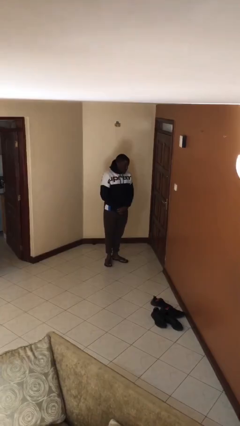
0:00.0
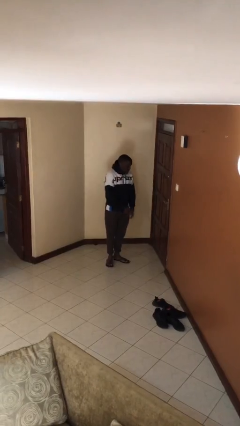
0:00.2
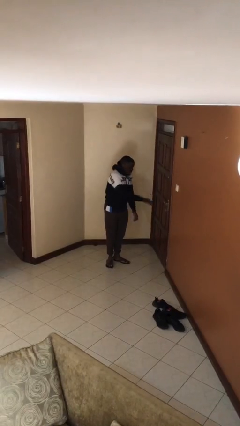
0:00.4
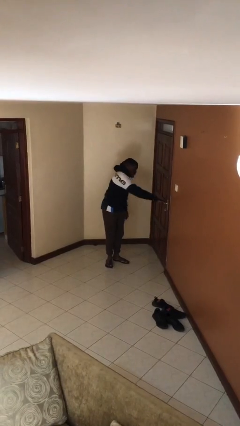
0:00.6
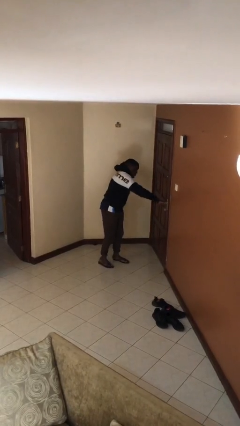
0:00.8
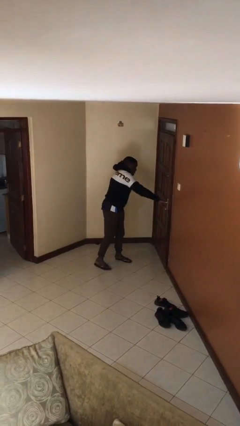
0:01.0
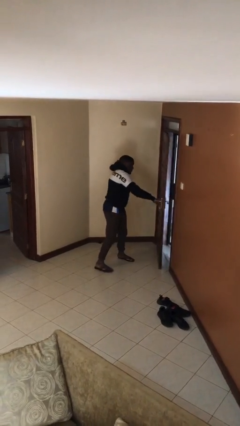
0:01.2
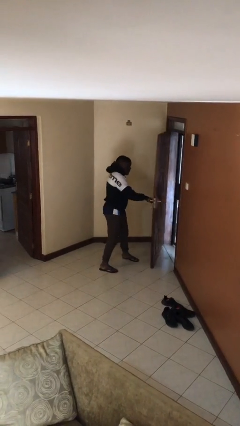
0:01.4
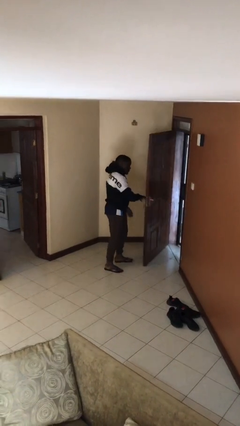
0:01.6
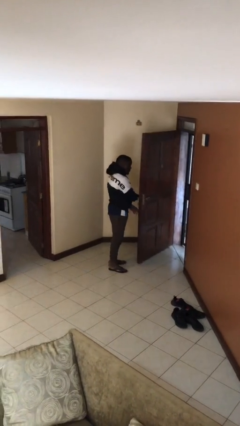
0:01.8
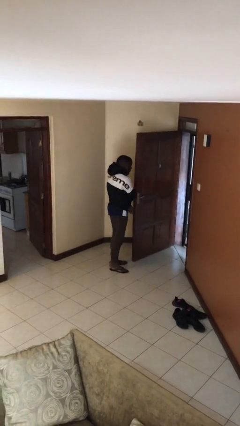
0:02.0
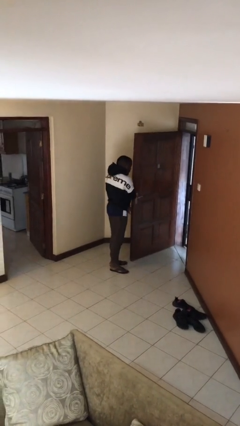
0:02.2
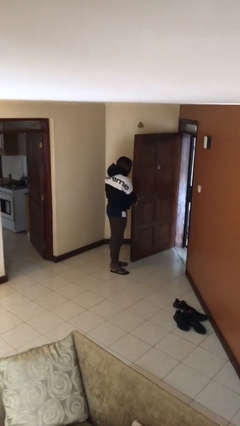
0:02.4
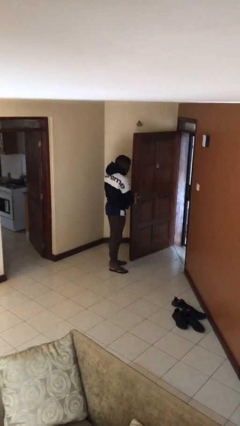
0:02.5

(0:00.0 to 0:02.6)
person opens facility door

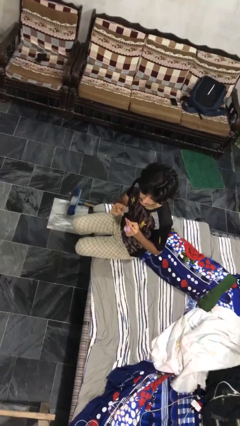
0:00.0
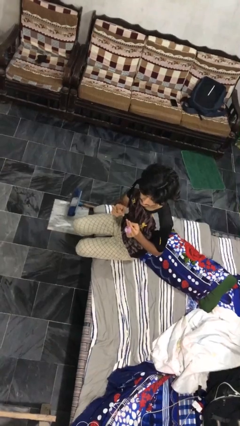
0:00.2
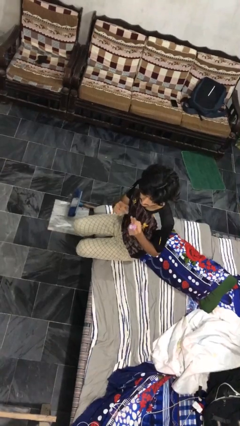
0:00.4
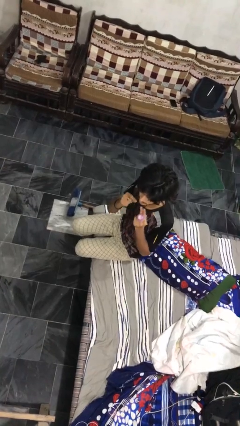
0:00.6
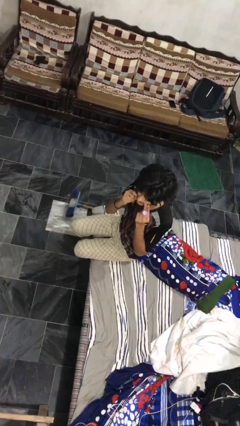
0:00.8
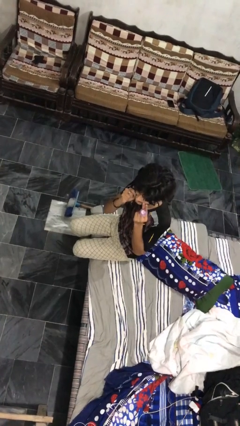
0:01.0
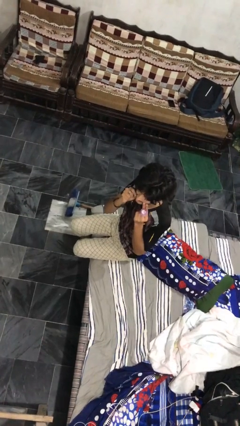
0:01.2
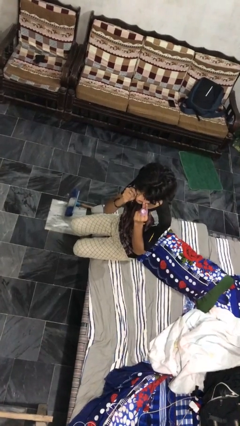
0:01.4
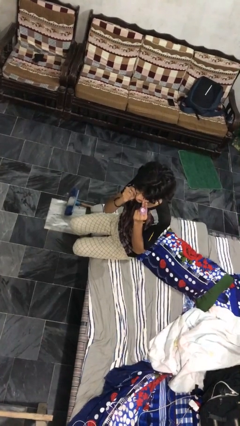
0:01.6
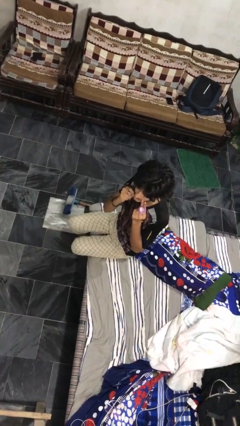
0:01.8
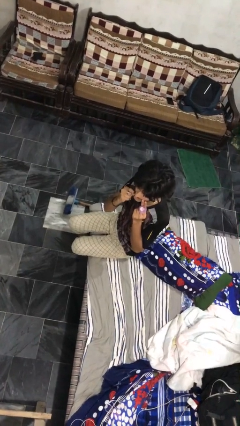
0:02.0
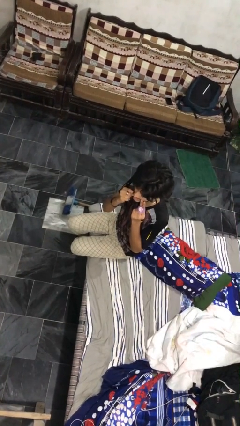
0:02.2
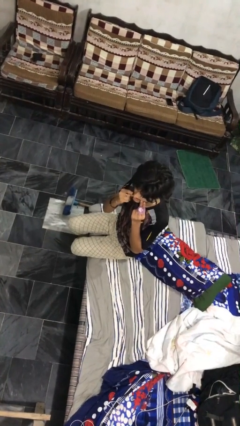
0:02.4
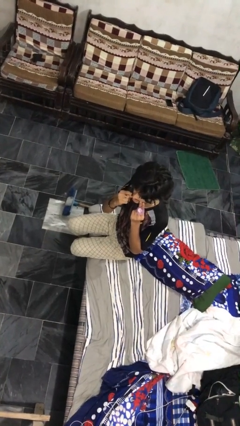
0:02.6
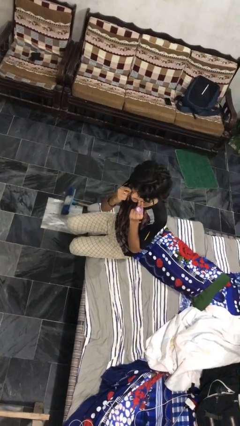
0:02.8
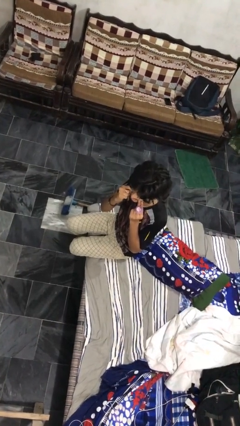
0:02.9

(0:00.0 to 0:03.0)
person flosses

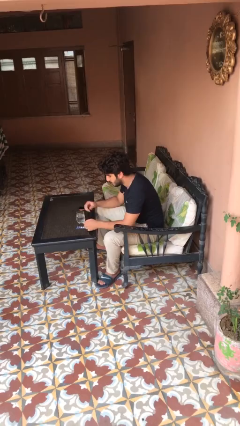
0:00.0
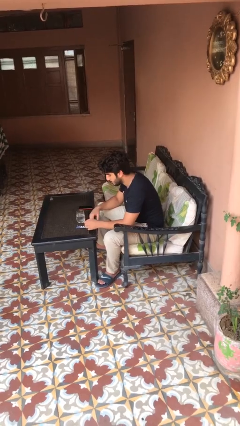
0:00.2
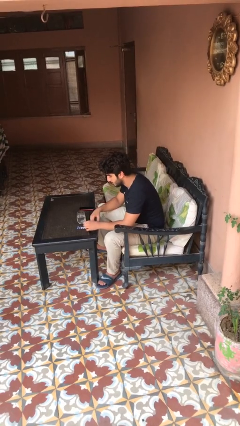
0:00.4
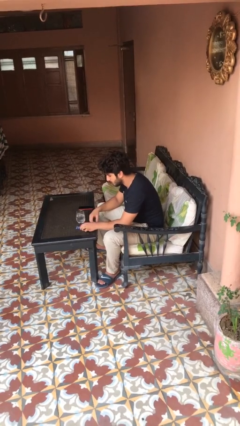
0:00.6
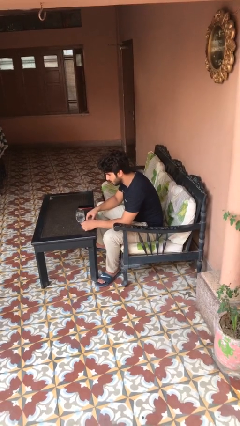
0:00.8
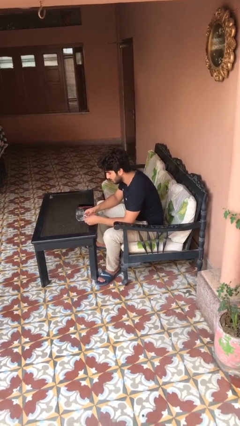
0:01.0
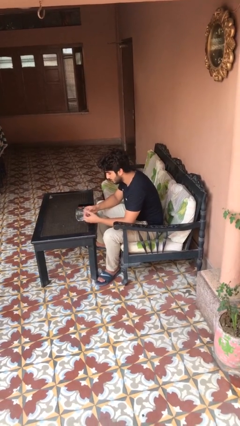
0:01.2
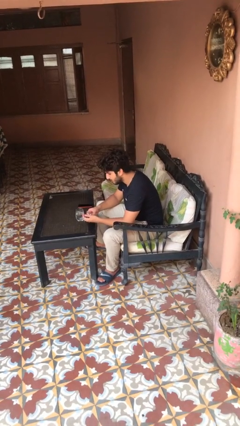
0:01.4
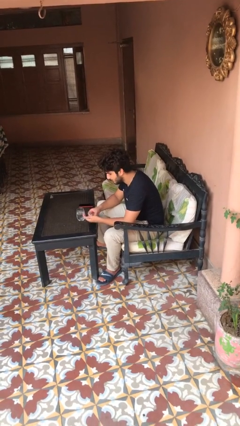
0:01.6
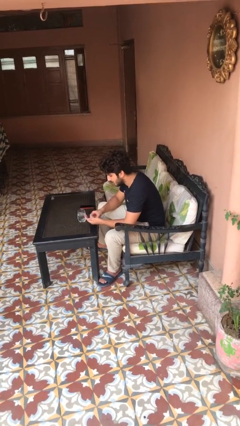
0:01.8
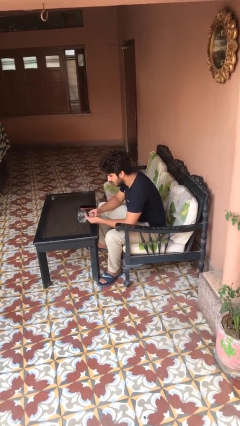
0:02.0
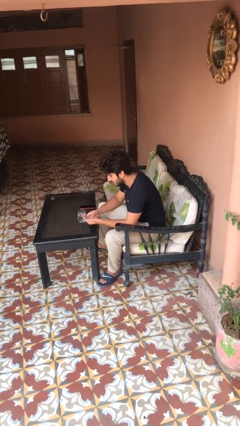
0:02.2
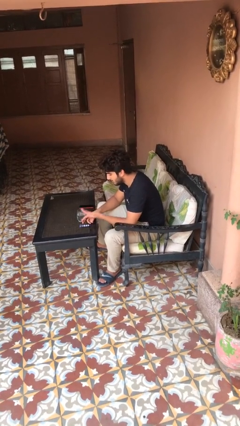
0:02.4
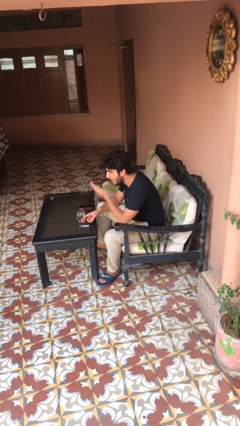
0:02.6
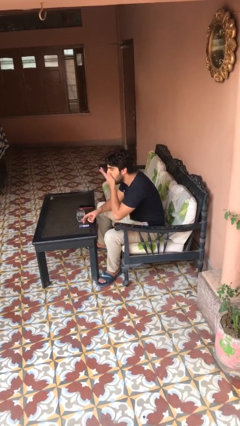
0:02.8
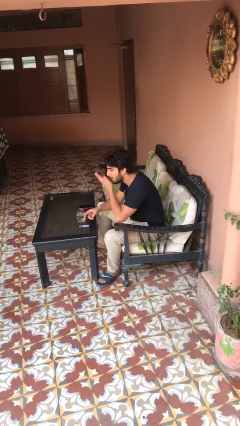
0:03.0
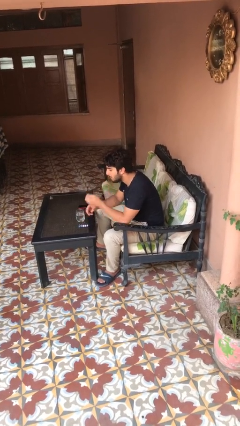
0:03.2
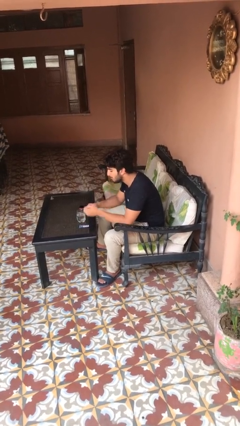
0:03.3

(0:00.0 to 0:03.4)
person takes medicine pills

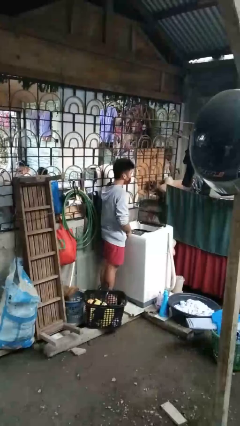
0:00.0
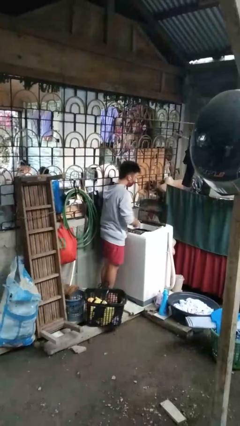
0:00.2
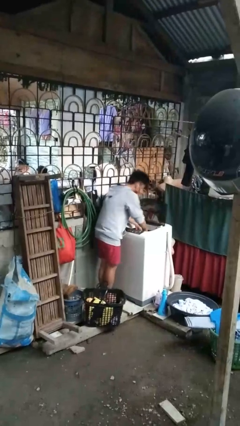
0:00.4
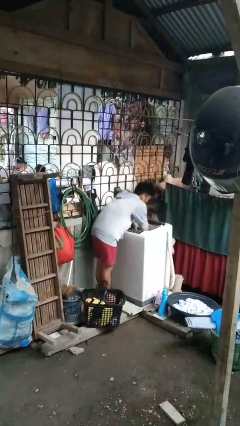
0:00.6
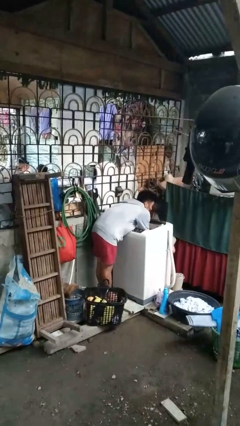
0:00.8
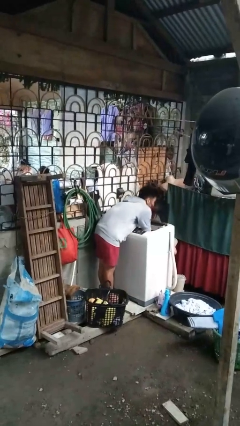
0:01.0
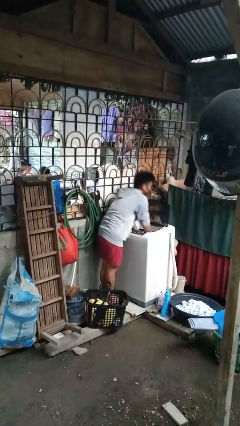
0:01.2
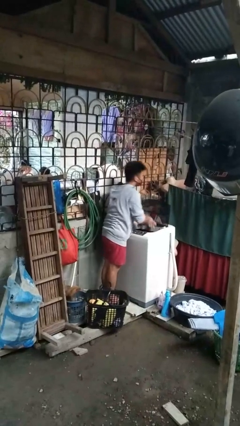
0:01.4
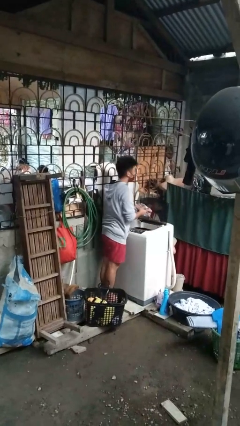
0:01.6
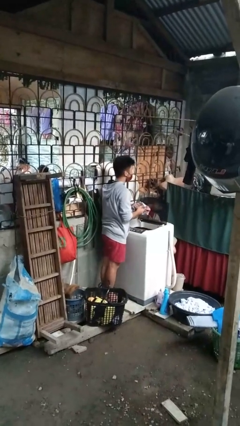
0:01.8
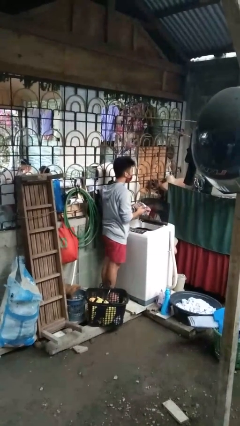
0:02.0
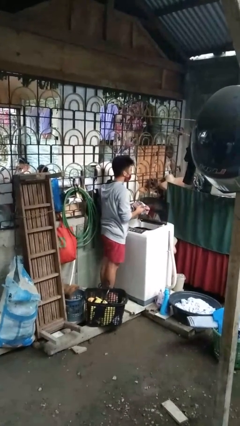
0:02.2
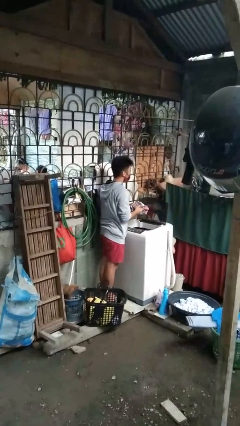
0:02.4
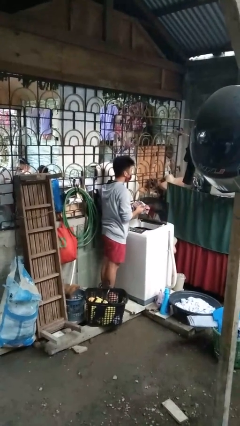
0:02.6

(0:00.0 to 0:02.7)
person unloads clotheswasher

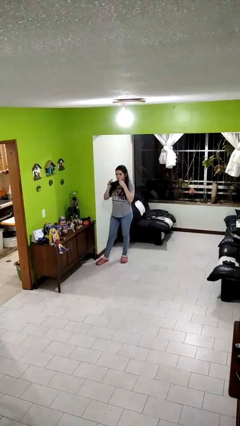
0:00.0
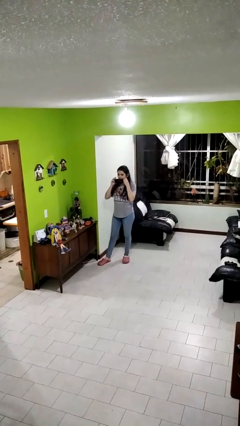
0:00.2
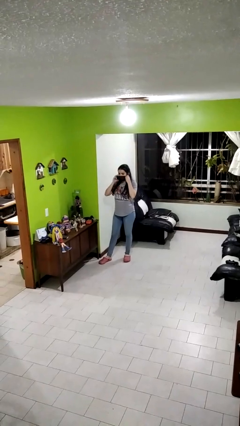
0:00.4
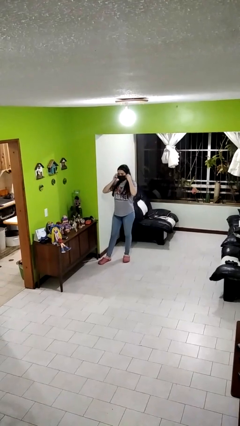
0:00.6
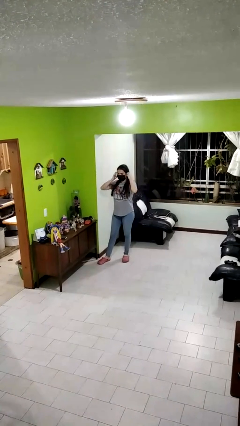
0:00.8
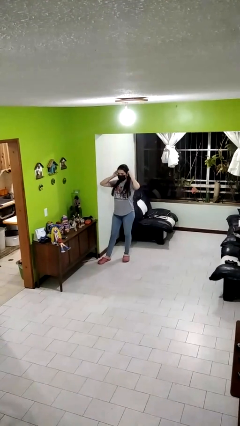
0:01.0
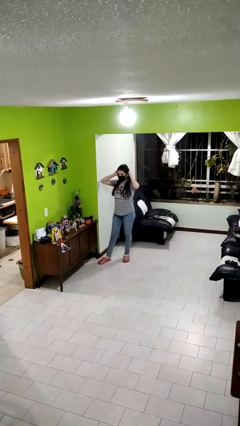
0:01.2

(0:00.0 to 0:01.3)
person puts on facemask

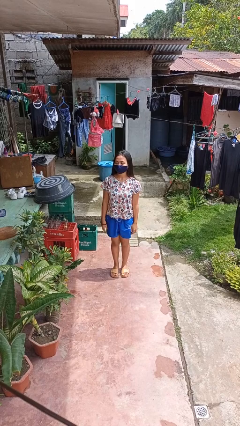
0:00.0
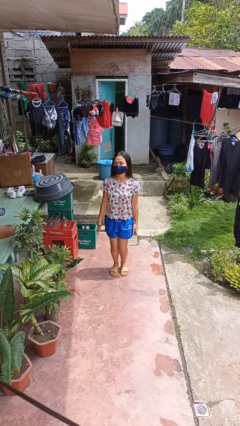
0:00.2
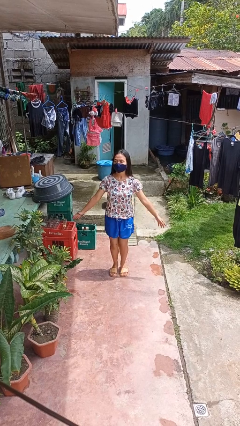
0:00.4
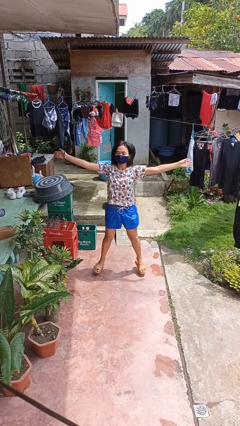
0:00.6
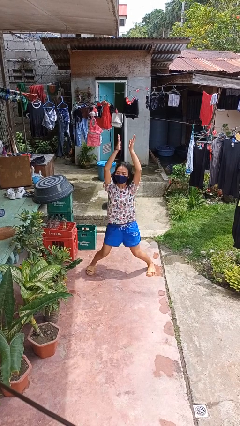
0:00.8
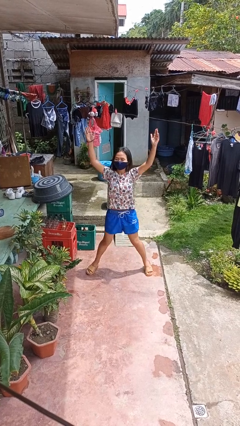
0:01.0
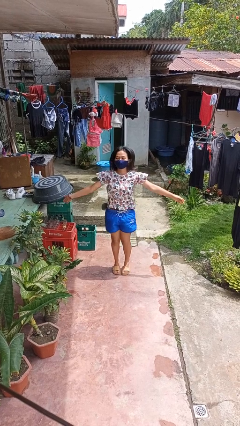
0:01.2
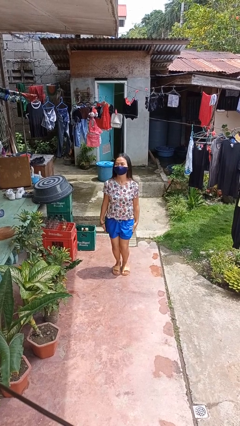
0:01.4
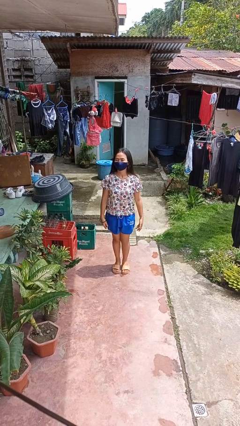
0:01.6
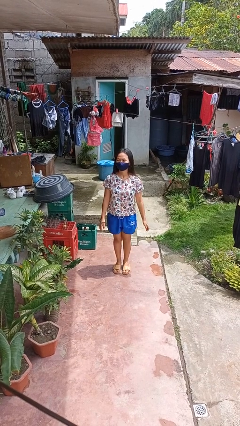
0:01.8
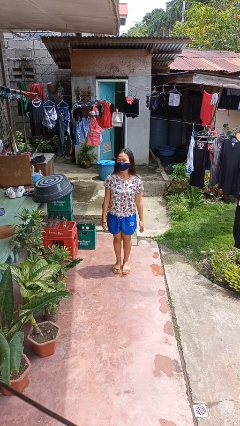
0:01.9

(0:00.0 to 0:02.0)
person exercises with jumping jacks

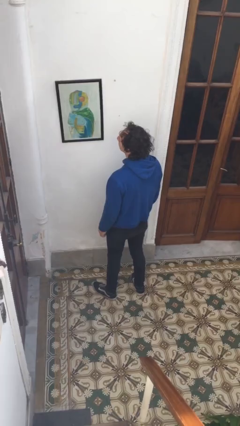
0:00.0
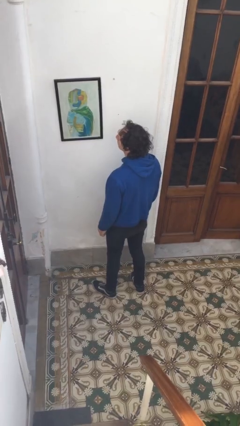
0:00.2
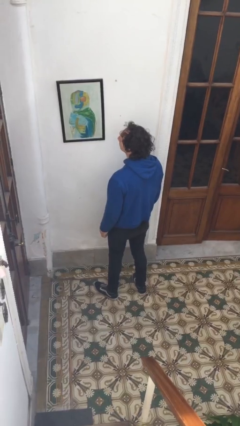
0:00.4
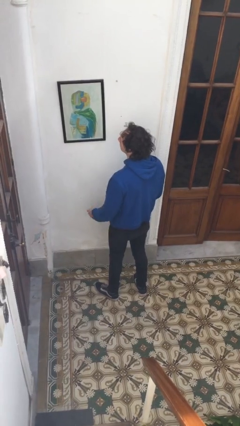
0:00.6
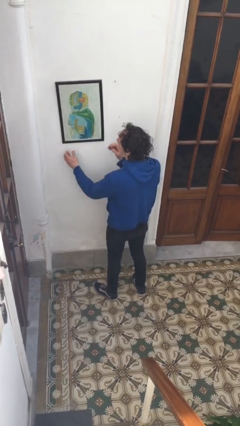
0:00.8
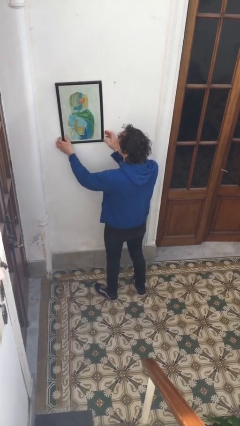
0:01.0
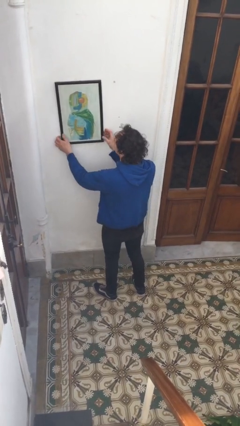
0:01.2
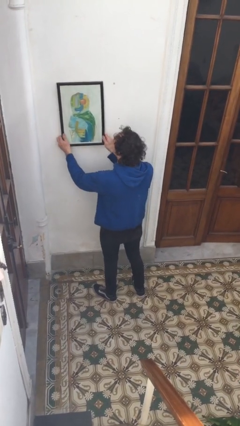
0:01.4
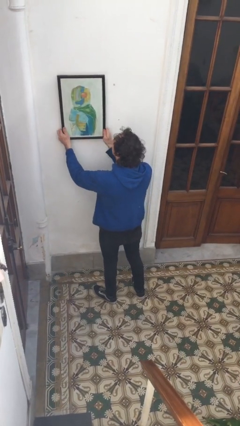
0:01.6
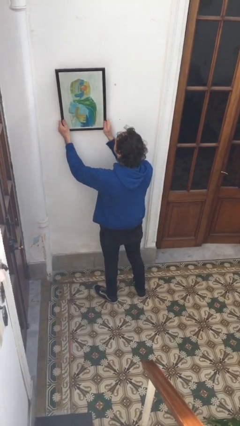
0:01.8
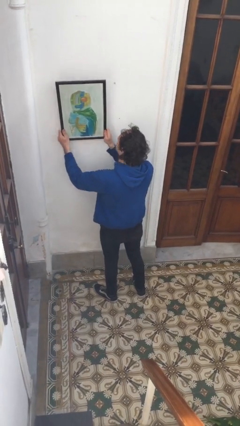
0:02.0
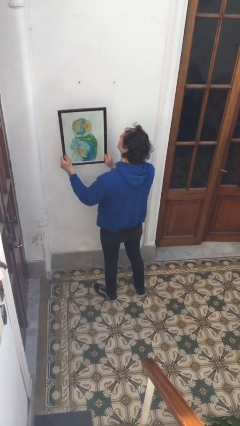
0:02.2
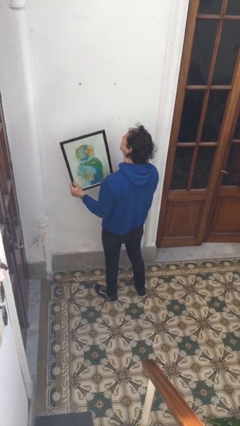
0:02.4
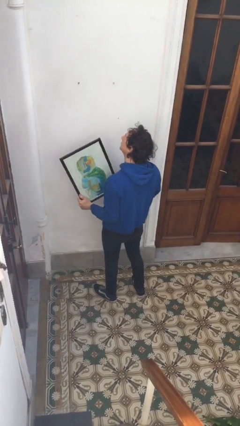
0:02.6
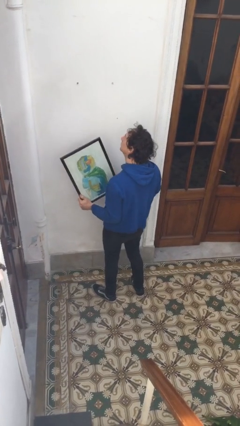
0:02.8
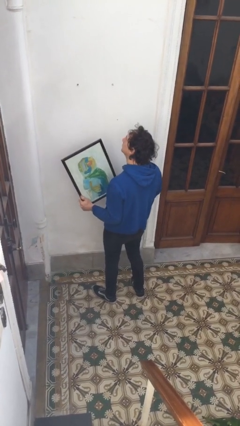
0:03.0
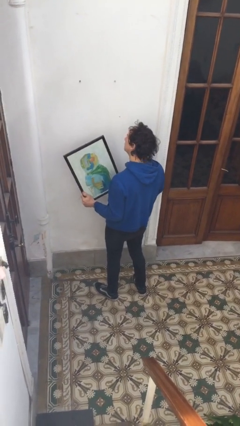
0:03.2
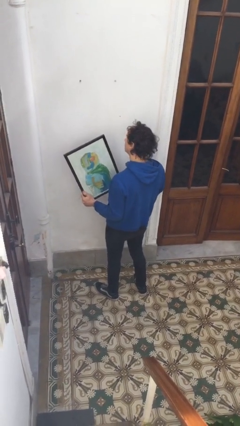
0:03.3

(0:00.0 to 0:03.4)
person takes down picture frame
